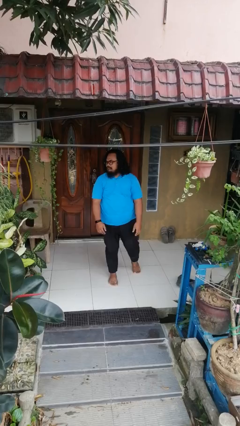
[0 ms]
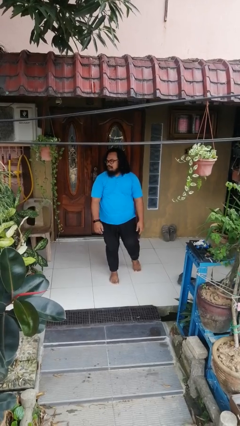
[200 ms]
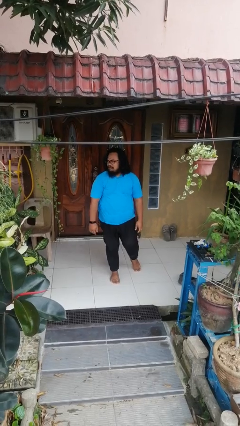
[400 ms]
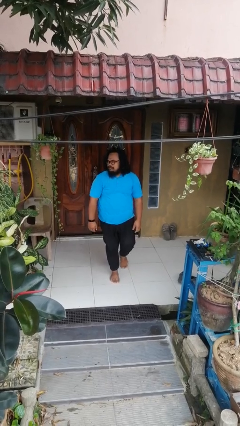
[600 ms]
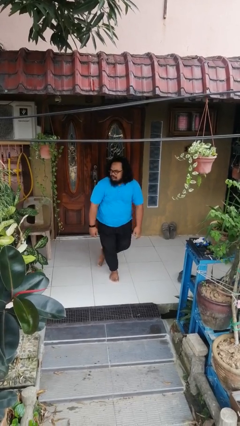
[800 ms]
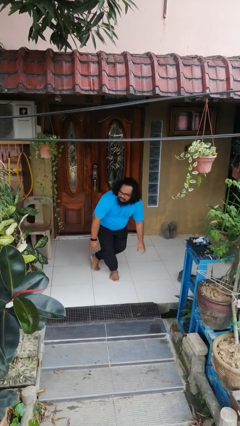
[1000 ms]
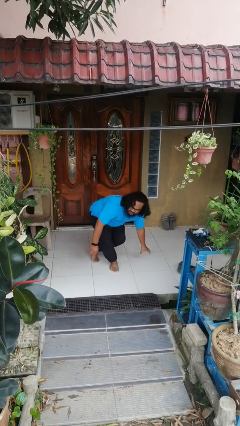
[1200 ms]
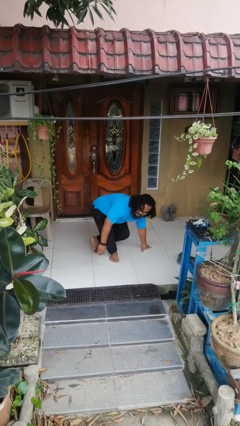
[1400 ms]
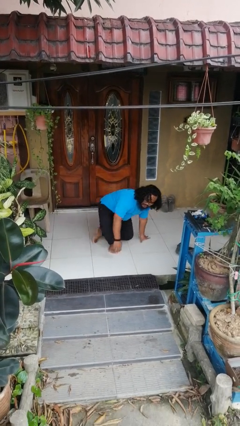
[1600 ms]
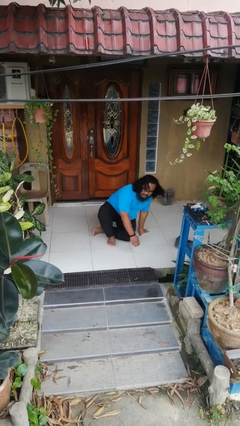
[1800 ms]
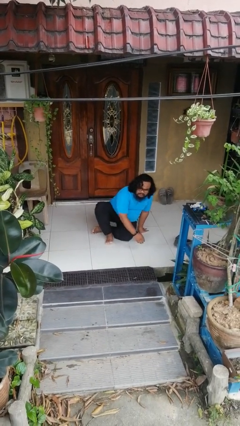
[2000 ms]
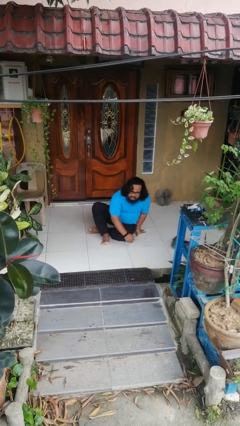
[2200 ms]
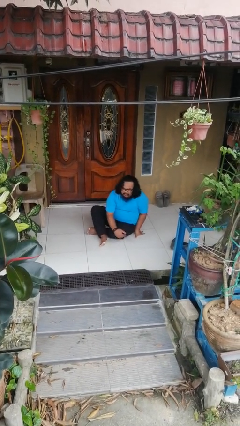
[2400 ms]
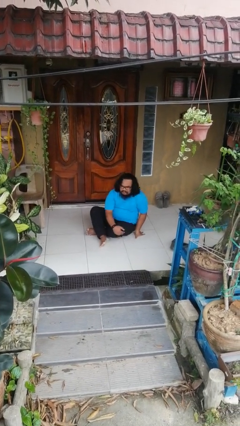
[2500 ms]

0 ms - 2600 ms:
person sits crisscross

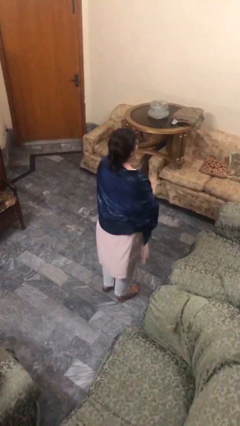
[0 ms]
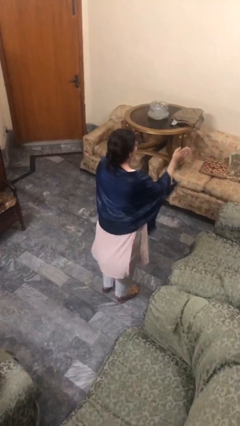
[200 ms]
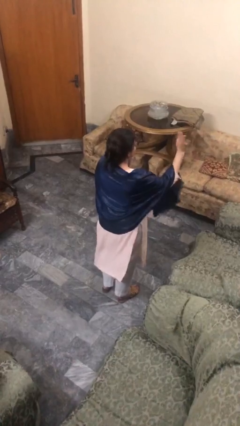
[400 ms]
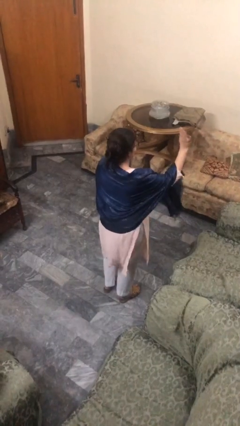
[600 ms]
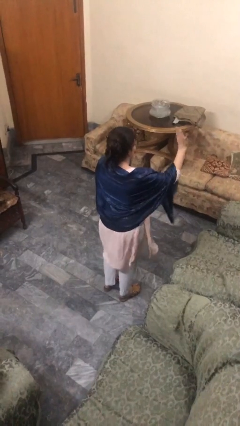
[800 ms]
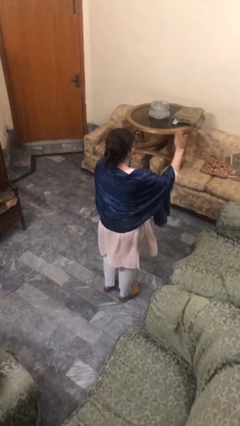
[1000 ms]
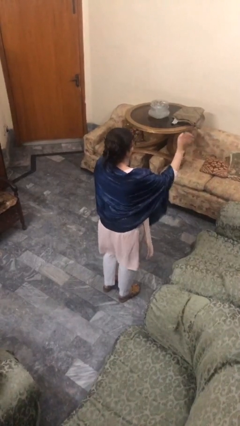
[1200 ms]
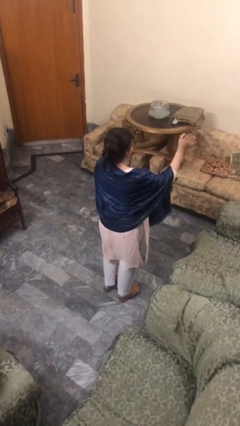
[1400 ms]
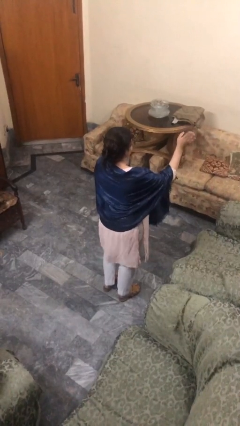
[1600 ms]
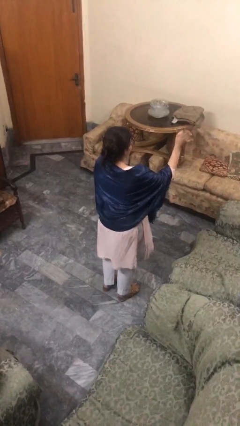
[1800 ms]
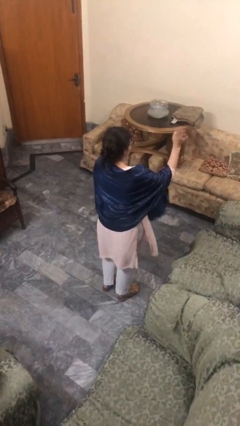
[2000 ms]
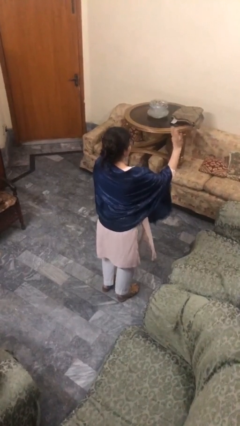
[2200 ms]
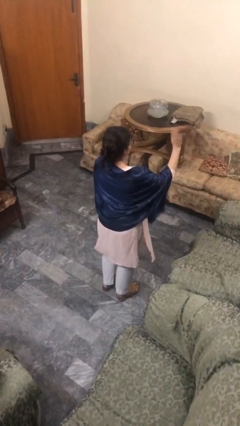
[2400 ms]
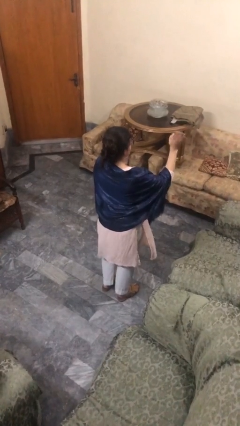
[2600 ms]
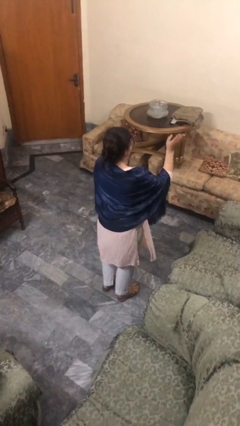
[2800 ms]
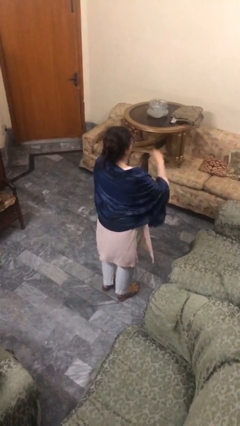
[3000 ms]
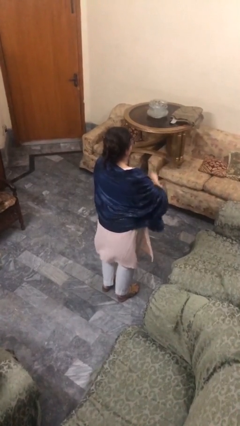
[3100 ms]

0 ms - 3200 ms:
person waves at person

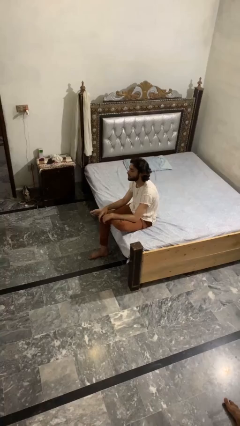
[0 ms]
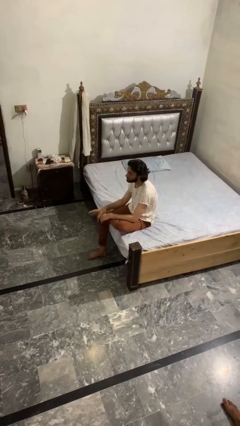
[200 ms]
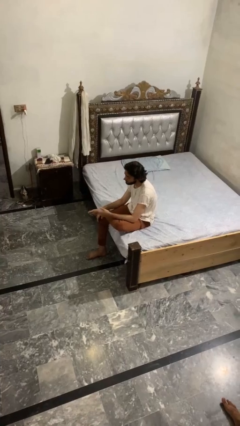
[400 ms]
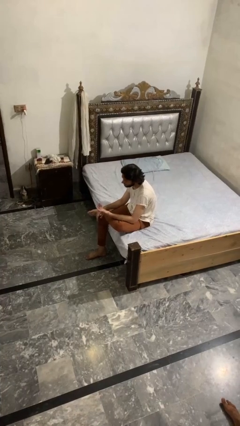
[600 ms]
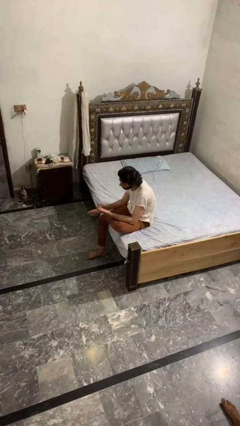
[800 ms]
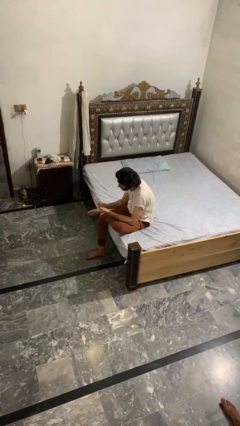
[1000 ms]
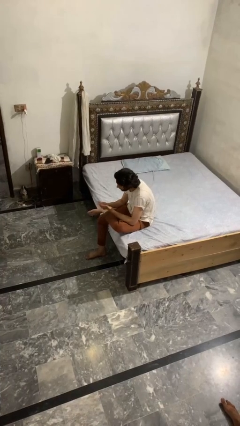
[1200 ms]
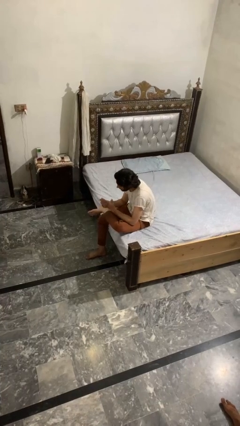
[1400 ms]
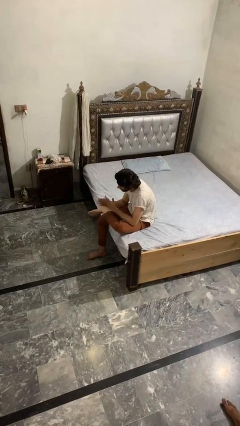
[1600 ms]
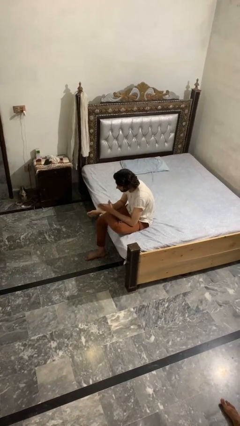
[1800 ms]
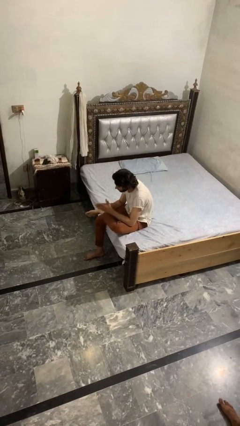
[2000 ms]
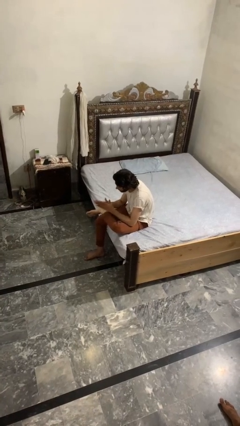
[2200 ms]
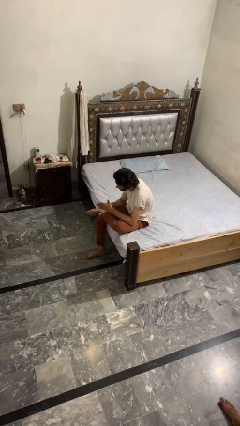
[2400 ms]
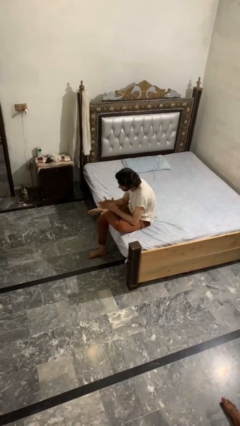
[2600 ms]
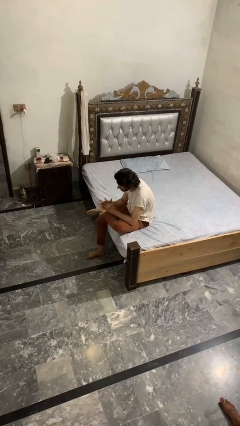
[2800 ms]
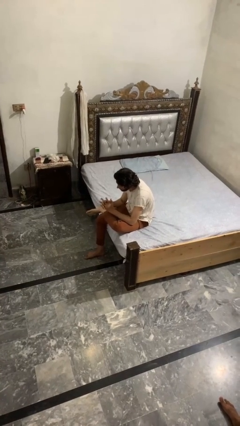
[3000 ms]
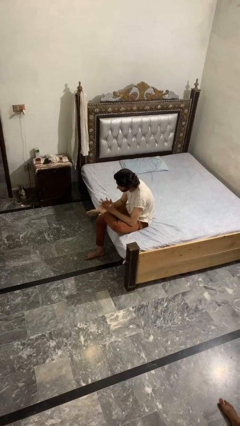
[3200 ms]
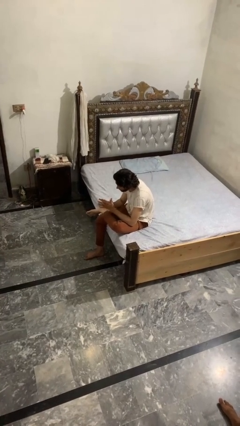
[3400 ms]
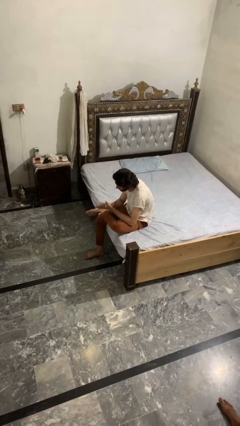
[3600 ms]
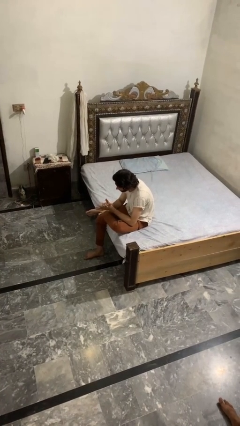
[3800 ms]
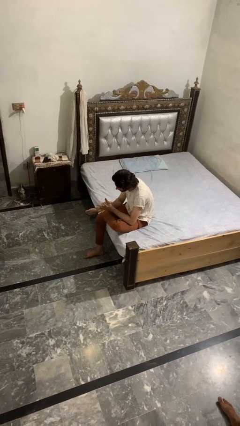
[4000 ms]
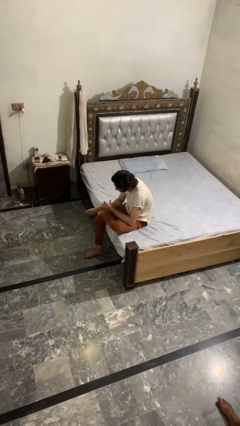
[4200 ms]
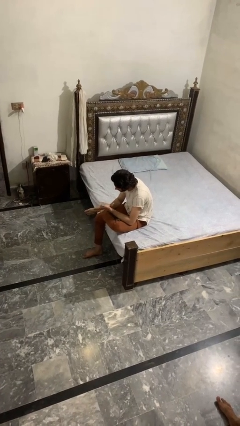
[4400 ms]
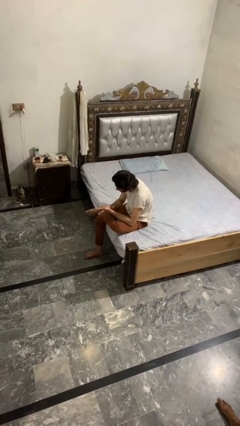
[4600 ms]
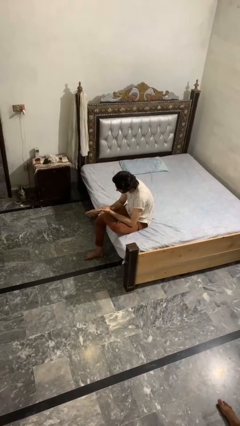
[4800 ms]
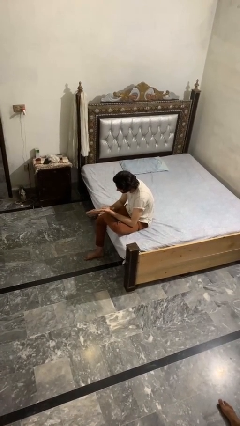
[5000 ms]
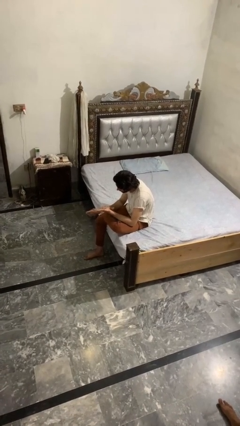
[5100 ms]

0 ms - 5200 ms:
person looks at hands in lap

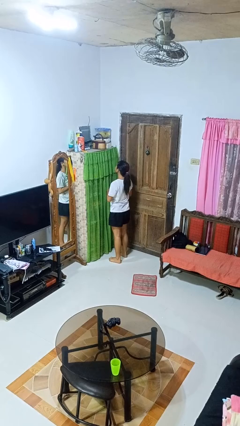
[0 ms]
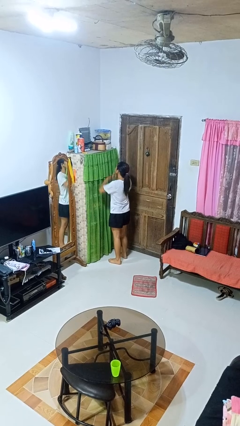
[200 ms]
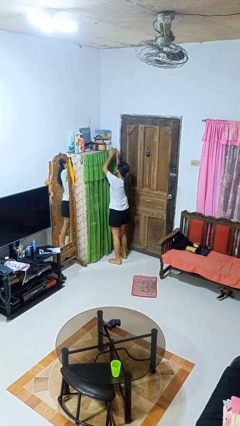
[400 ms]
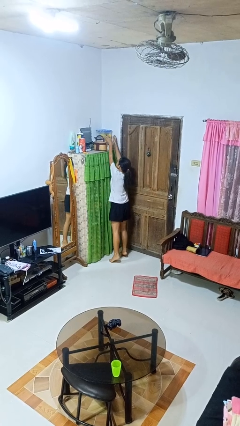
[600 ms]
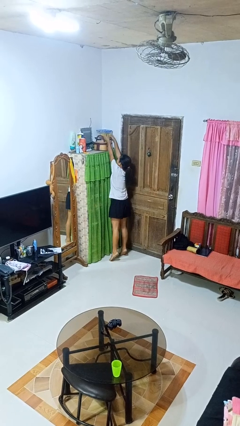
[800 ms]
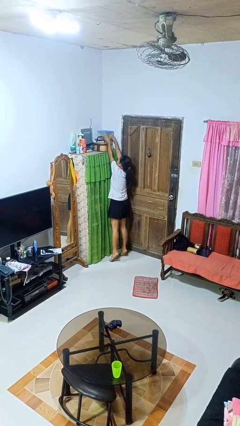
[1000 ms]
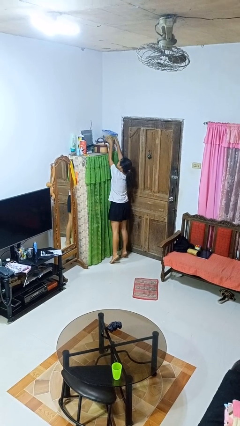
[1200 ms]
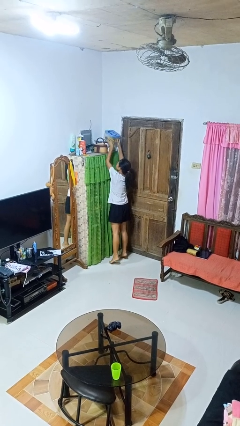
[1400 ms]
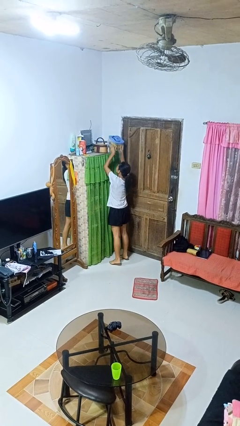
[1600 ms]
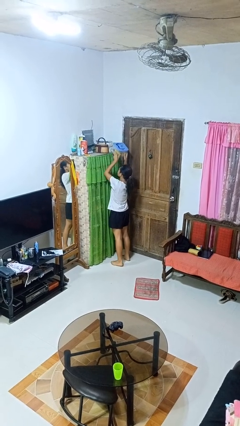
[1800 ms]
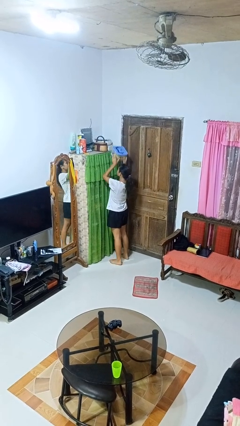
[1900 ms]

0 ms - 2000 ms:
person picks up object from shelf

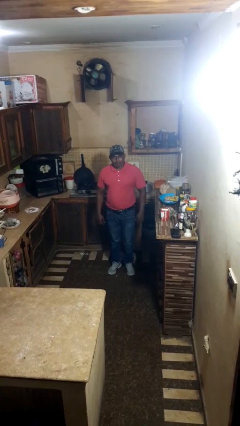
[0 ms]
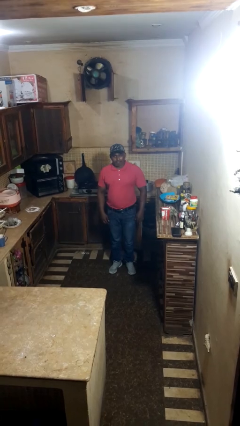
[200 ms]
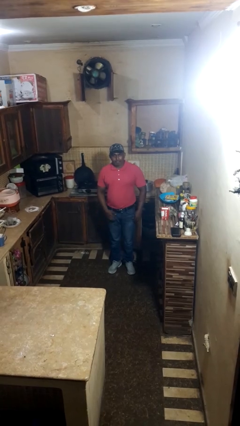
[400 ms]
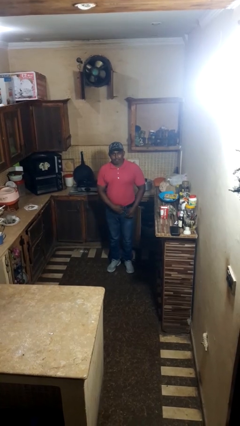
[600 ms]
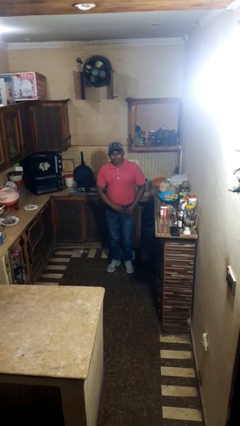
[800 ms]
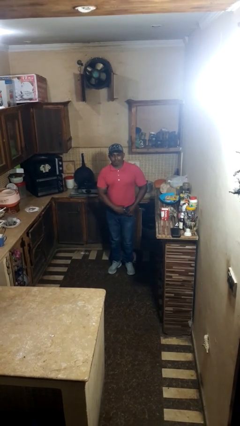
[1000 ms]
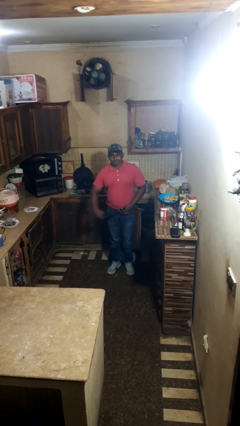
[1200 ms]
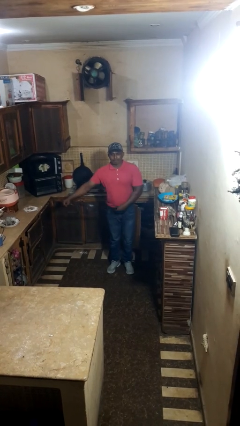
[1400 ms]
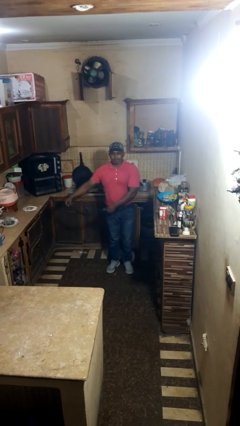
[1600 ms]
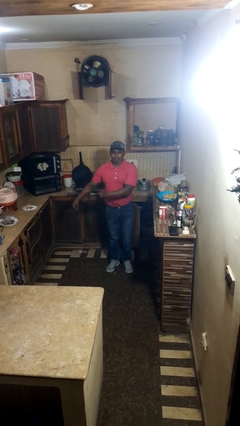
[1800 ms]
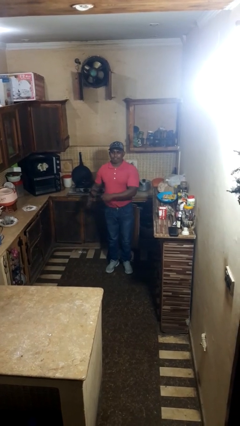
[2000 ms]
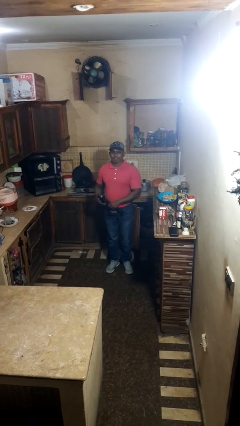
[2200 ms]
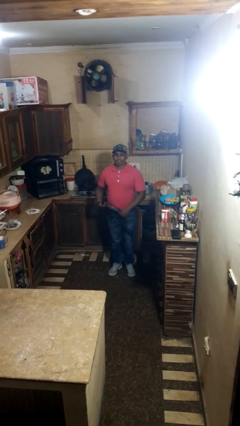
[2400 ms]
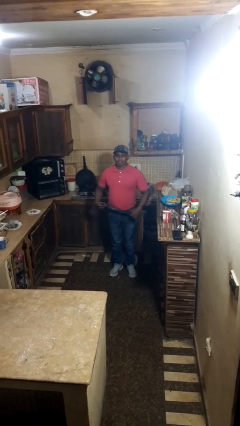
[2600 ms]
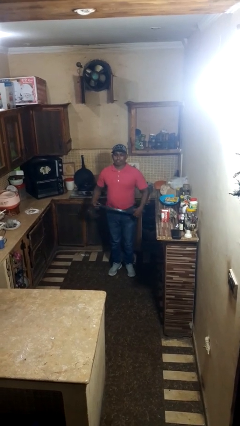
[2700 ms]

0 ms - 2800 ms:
person takes off belt

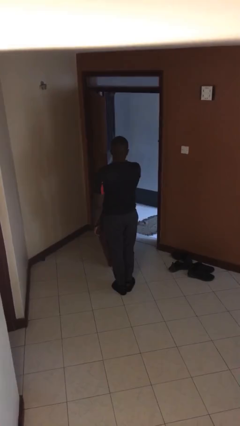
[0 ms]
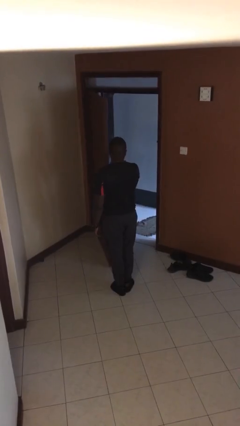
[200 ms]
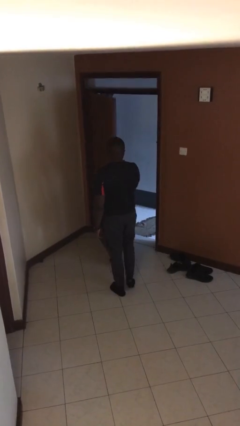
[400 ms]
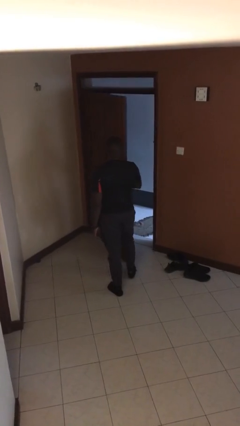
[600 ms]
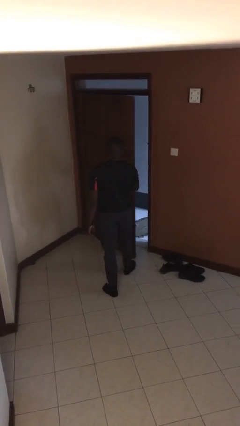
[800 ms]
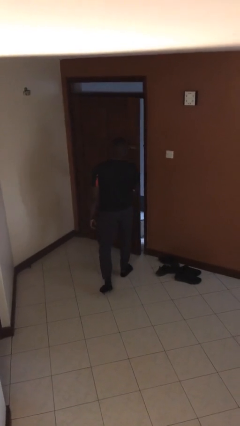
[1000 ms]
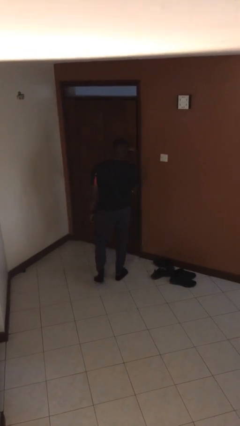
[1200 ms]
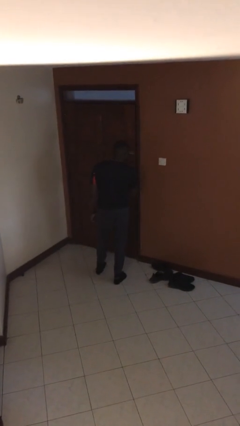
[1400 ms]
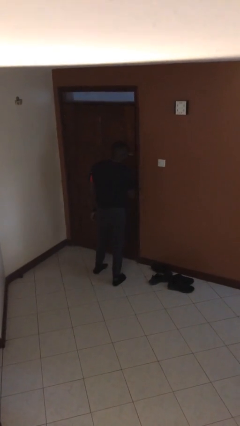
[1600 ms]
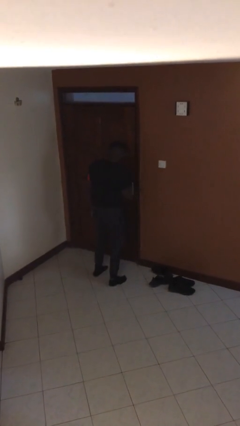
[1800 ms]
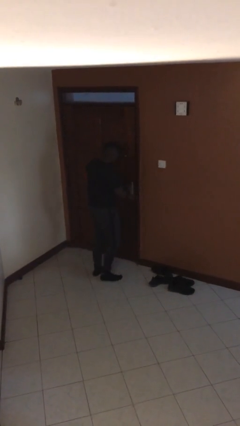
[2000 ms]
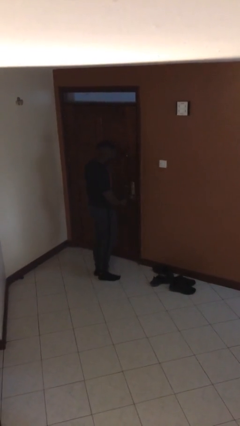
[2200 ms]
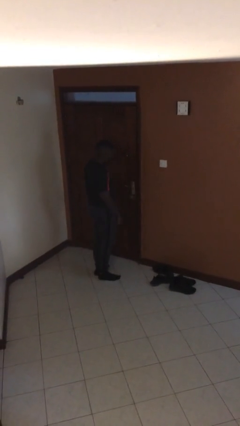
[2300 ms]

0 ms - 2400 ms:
person closes facility door
